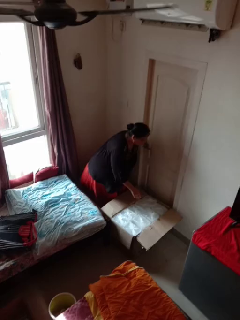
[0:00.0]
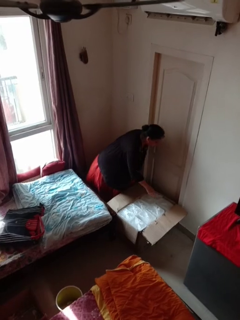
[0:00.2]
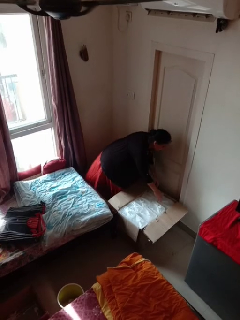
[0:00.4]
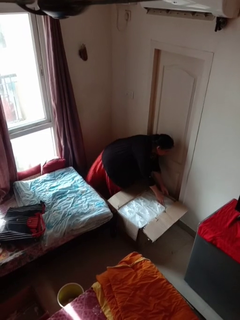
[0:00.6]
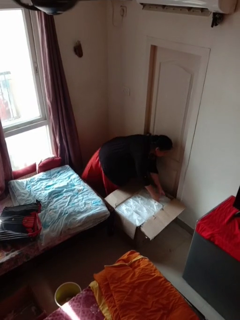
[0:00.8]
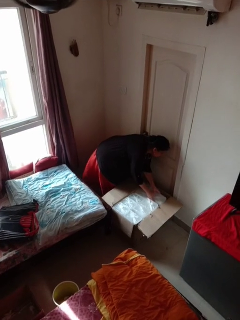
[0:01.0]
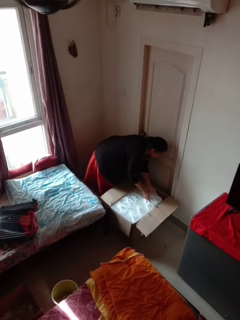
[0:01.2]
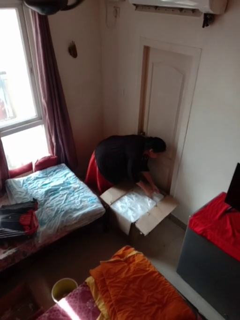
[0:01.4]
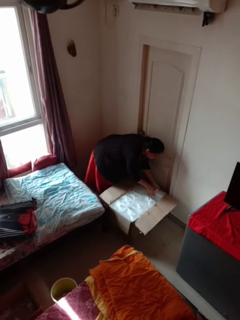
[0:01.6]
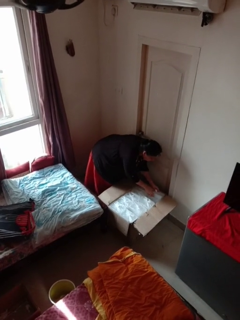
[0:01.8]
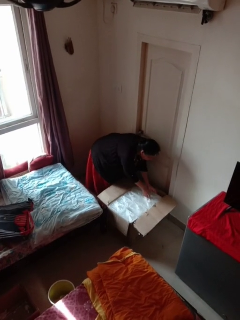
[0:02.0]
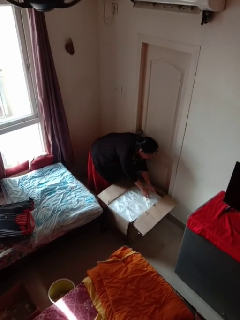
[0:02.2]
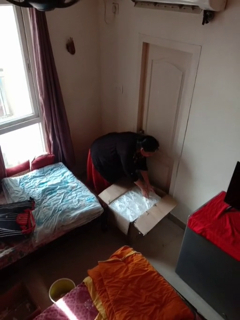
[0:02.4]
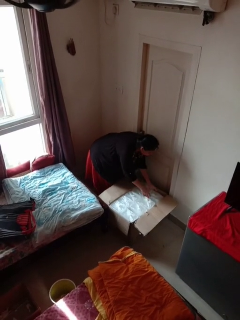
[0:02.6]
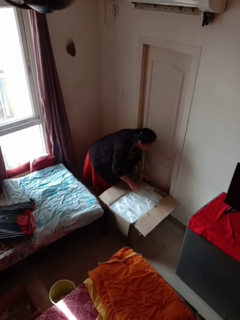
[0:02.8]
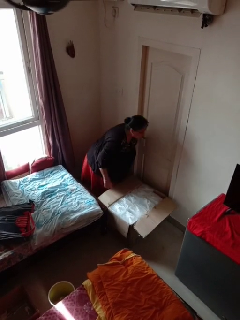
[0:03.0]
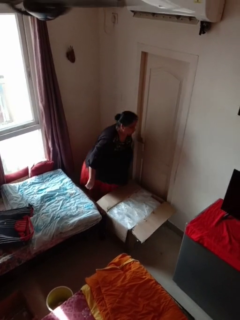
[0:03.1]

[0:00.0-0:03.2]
person searches in box

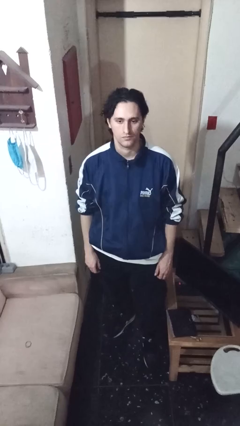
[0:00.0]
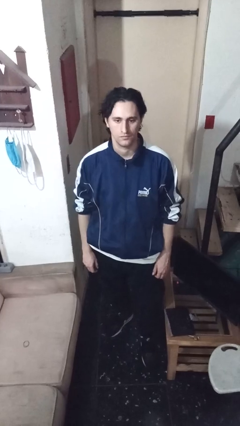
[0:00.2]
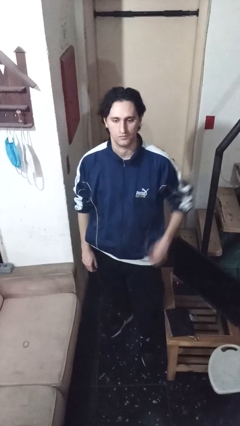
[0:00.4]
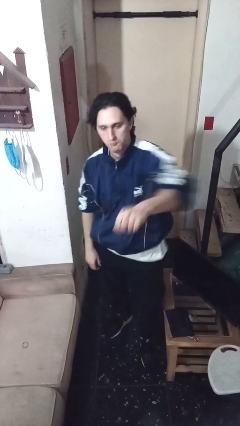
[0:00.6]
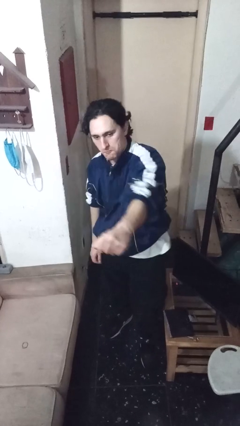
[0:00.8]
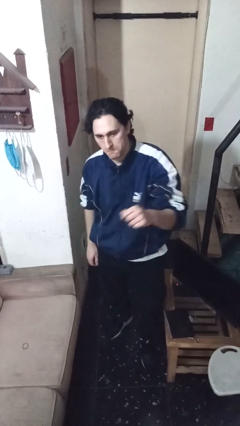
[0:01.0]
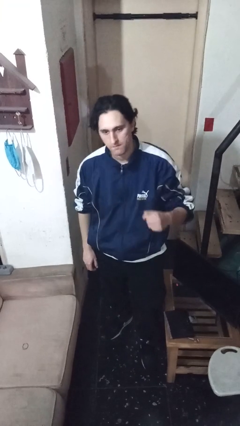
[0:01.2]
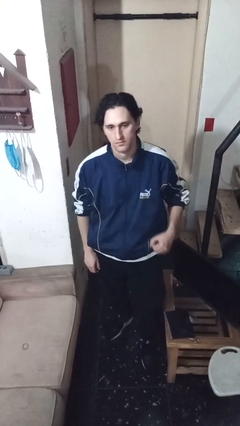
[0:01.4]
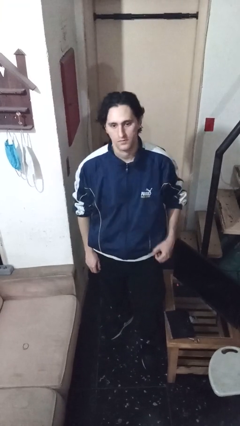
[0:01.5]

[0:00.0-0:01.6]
person punches

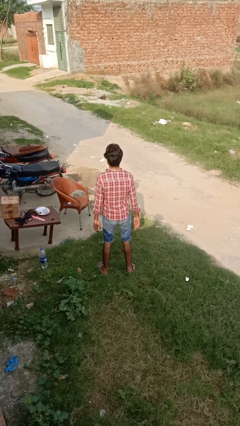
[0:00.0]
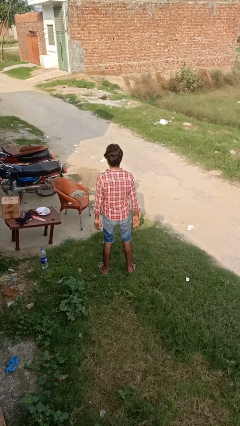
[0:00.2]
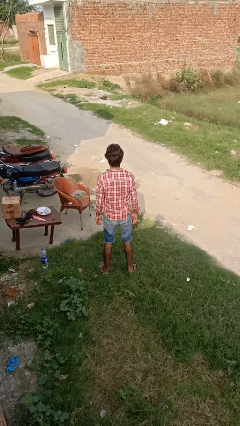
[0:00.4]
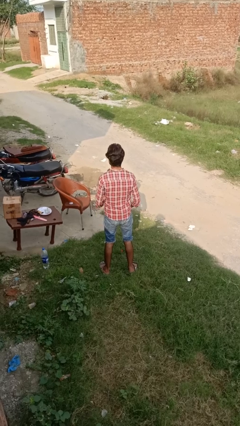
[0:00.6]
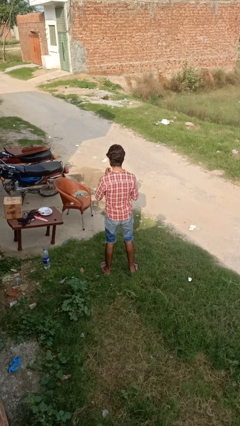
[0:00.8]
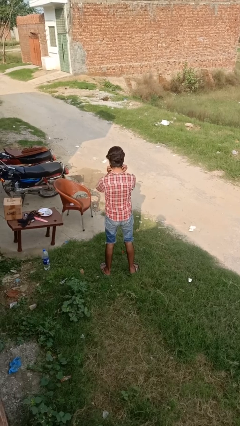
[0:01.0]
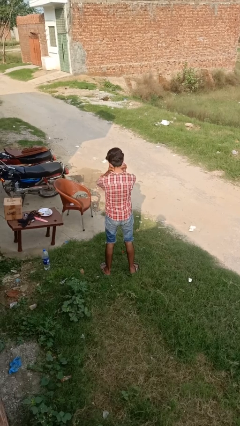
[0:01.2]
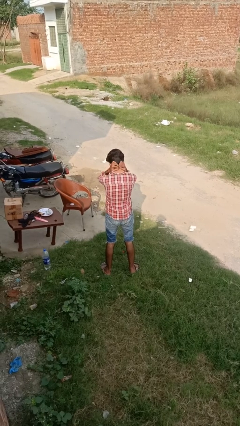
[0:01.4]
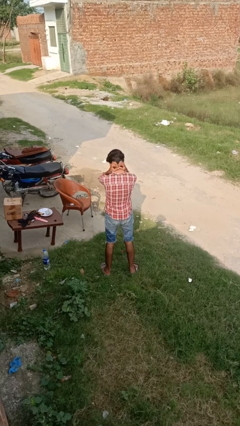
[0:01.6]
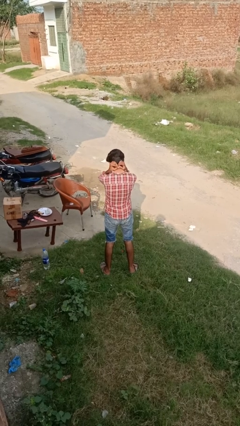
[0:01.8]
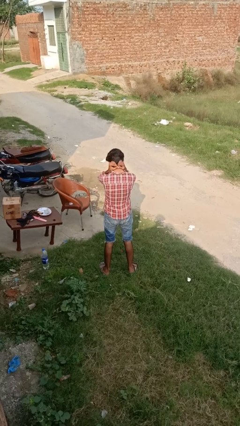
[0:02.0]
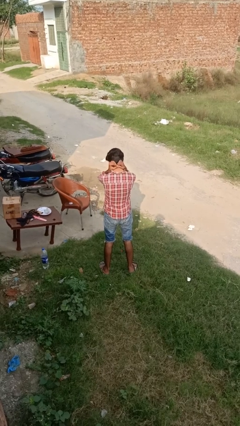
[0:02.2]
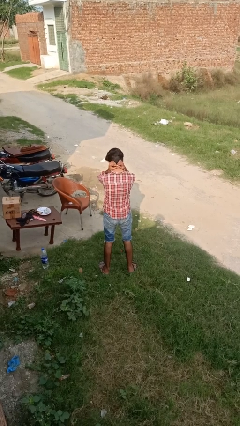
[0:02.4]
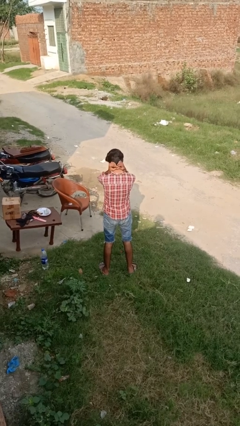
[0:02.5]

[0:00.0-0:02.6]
person puts on necklace

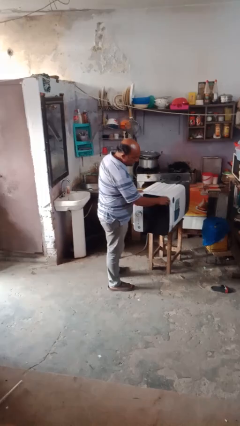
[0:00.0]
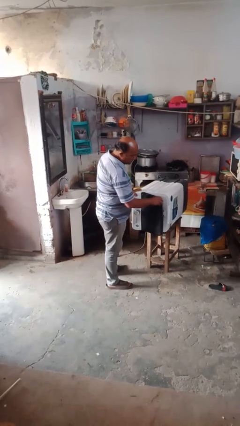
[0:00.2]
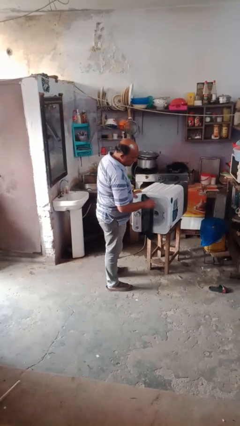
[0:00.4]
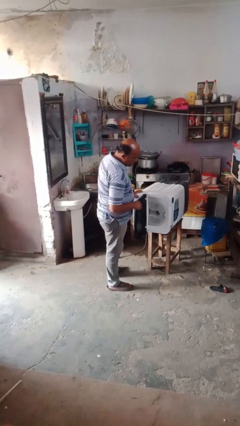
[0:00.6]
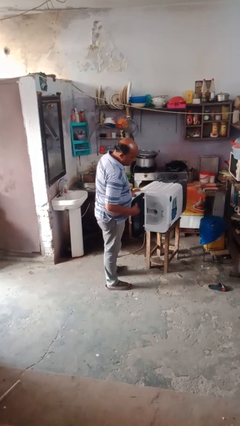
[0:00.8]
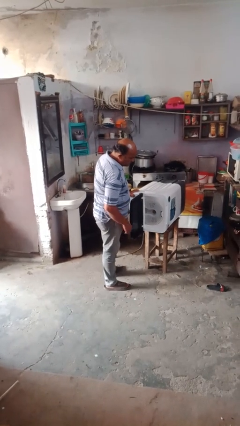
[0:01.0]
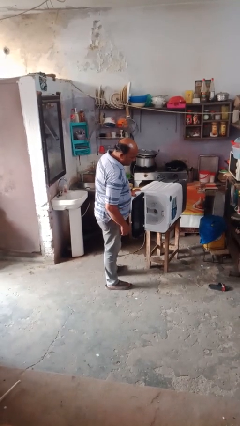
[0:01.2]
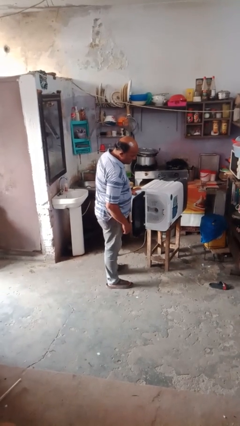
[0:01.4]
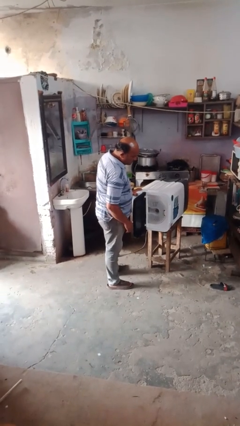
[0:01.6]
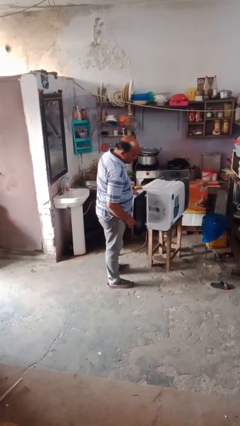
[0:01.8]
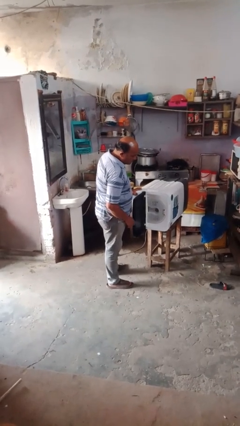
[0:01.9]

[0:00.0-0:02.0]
person opens dishwasher

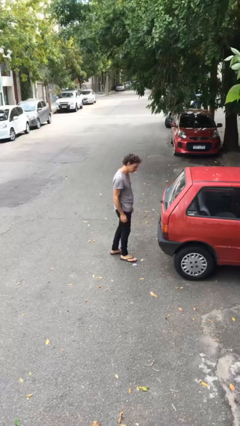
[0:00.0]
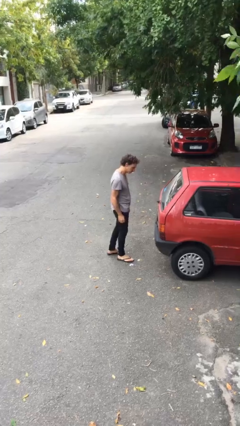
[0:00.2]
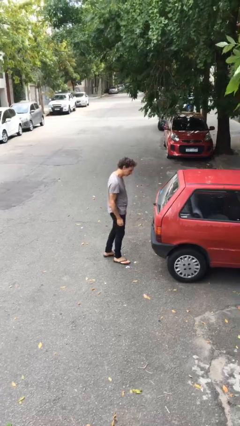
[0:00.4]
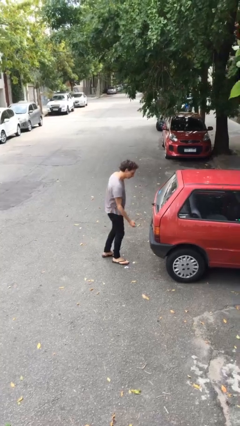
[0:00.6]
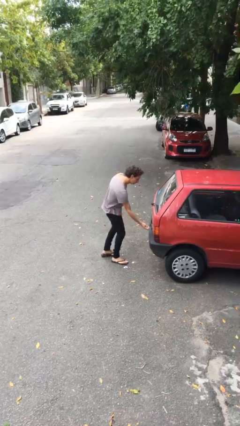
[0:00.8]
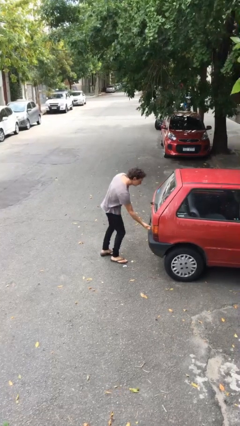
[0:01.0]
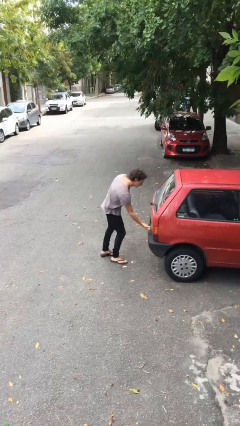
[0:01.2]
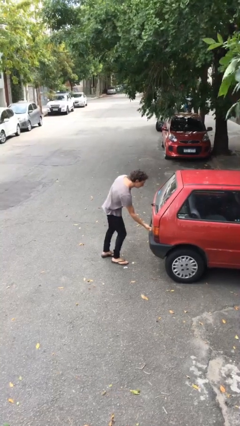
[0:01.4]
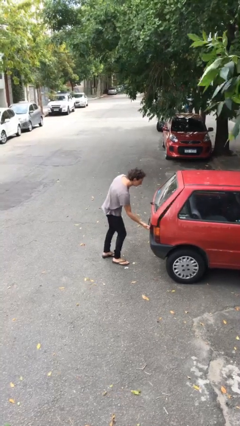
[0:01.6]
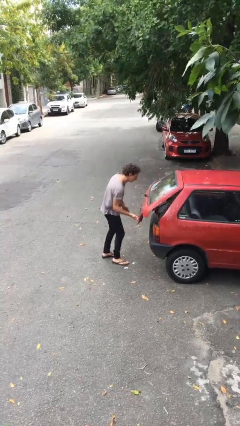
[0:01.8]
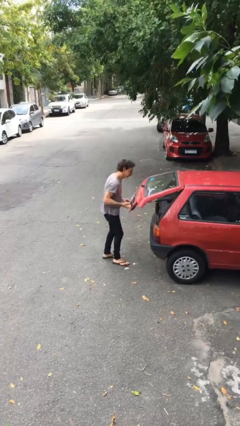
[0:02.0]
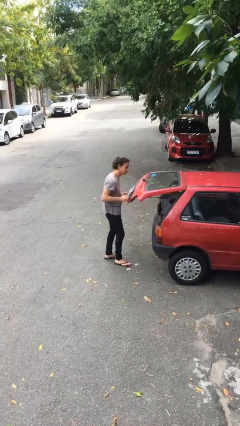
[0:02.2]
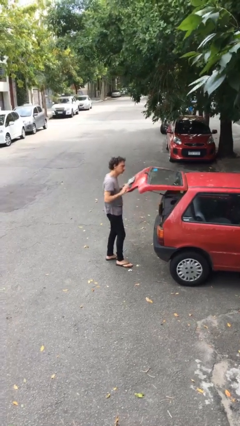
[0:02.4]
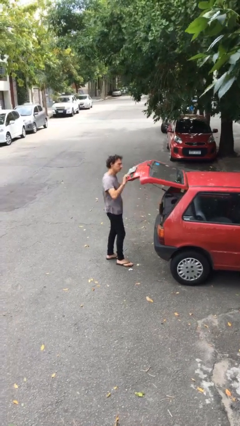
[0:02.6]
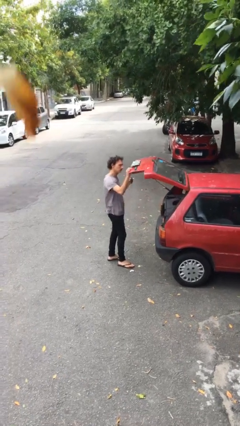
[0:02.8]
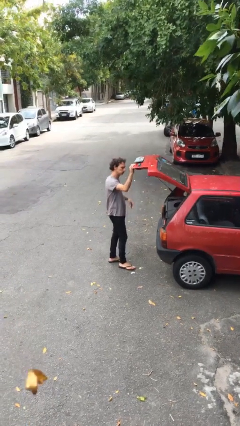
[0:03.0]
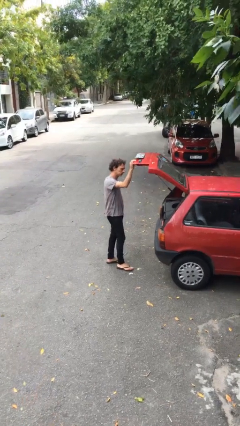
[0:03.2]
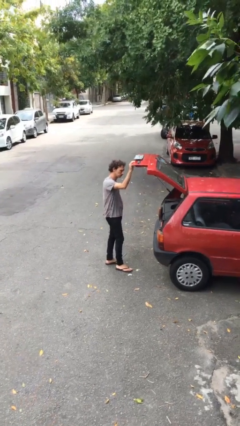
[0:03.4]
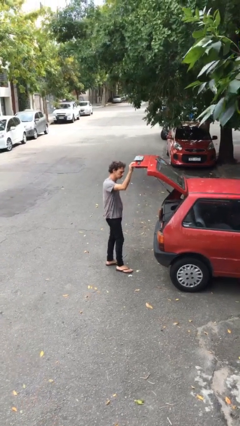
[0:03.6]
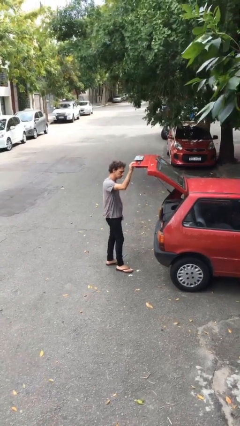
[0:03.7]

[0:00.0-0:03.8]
person opens car trunk

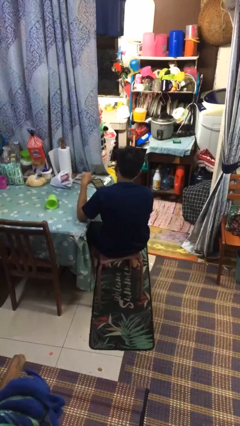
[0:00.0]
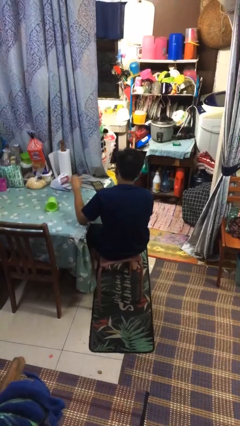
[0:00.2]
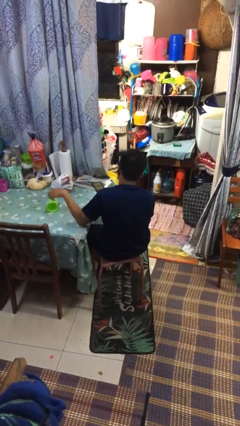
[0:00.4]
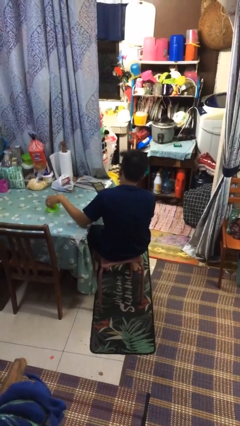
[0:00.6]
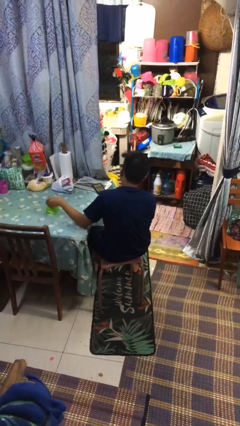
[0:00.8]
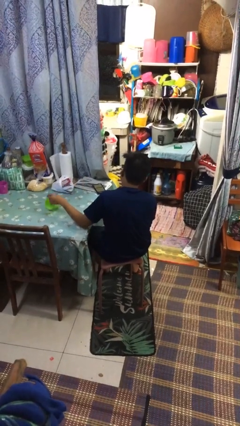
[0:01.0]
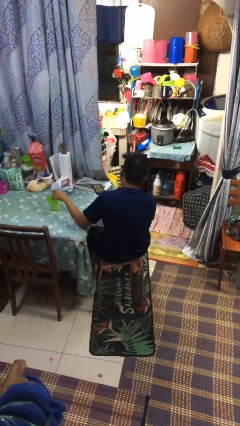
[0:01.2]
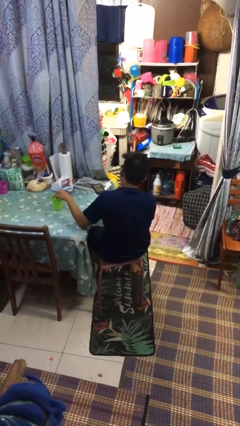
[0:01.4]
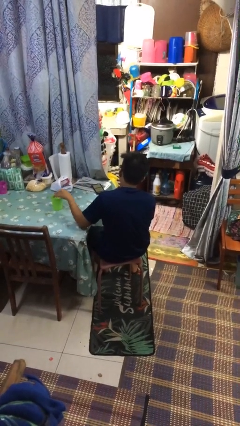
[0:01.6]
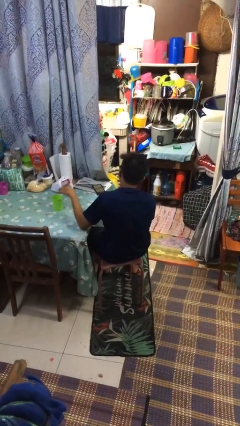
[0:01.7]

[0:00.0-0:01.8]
person sets upright glass

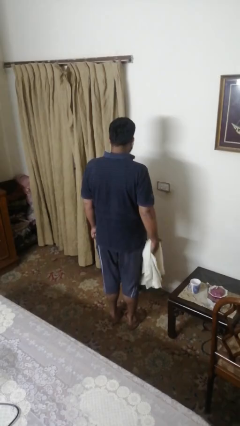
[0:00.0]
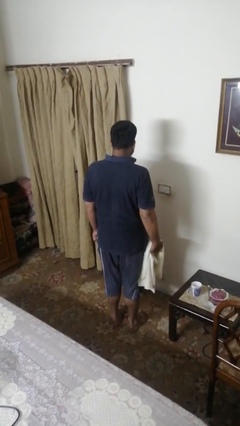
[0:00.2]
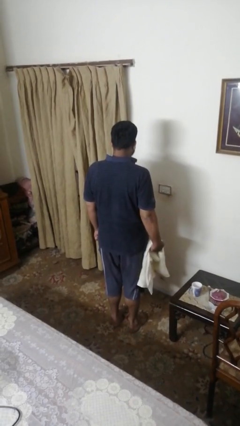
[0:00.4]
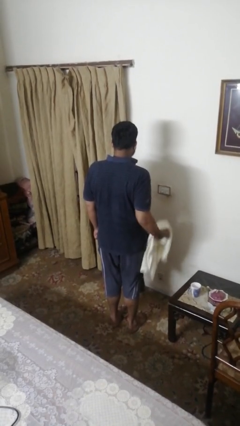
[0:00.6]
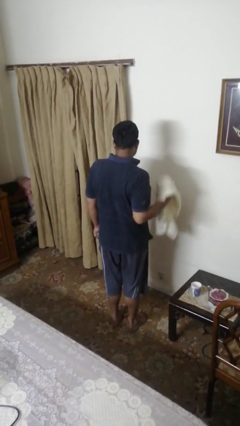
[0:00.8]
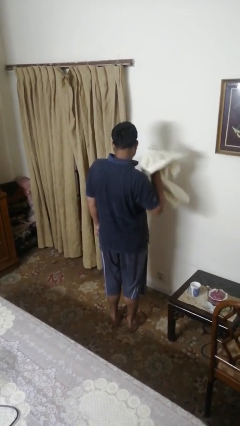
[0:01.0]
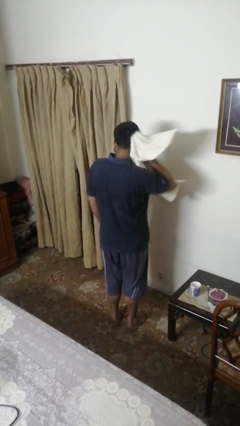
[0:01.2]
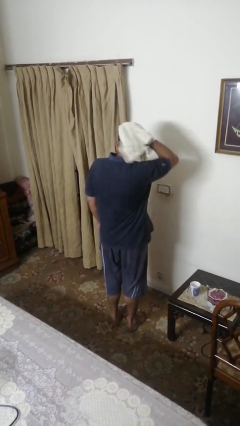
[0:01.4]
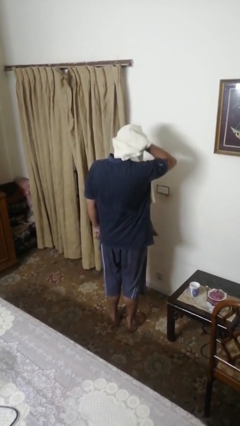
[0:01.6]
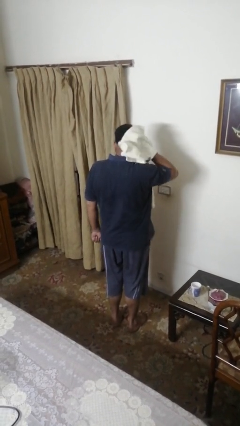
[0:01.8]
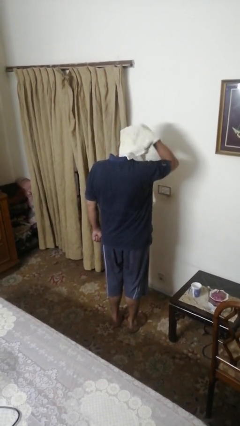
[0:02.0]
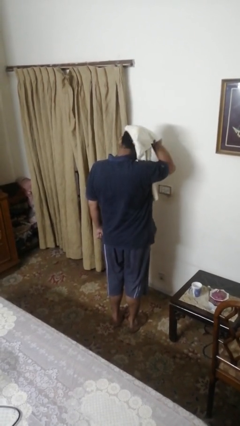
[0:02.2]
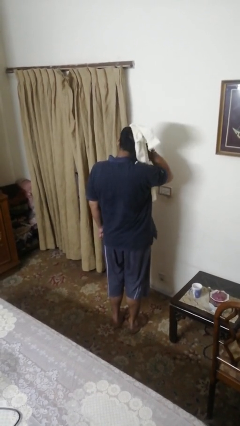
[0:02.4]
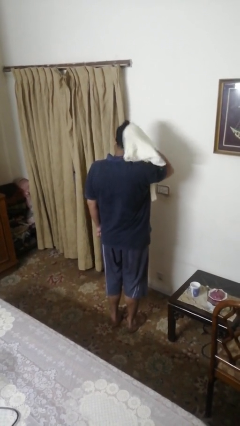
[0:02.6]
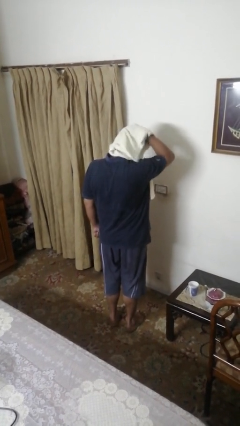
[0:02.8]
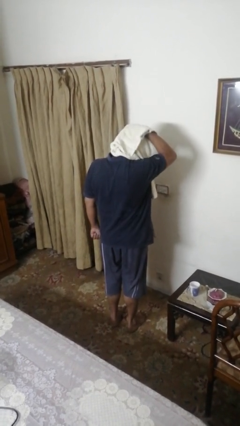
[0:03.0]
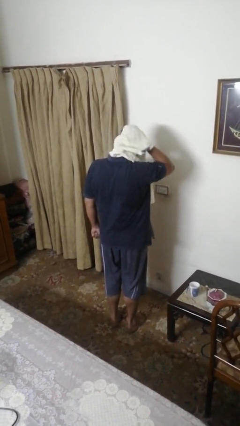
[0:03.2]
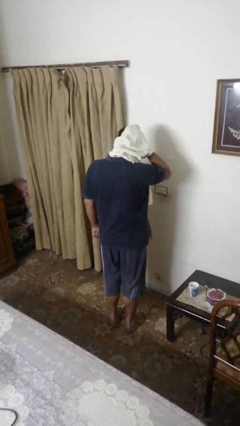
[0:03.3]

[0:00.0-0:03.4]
person dries hair with towel
